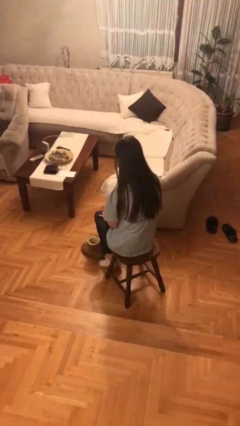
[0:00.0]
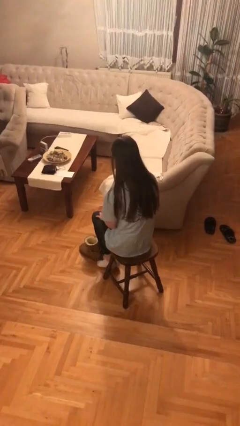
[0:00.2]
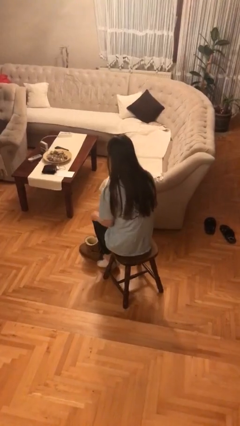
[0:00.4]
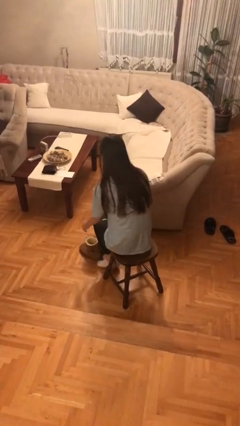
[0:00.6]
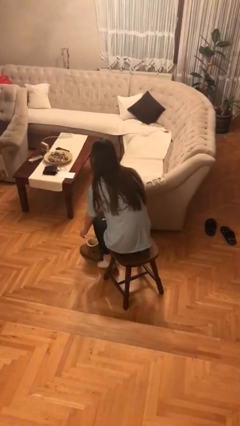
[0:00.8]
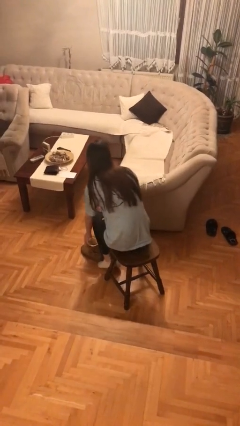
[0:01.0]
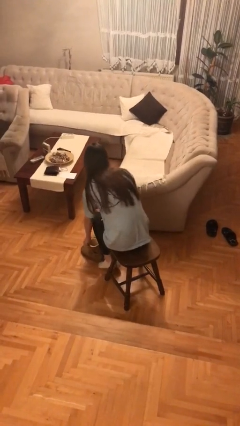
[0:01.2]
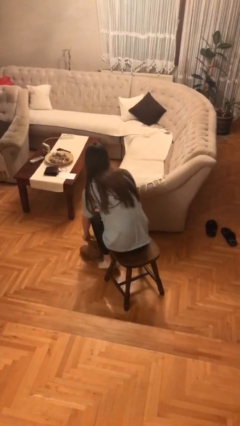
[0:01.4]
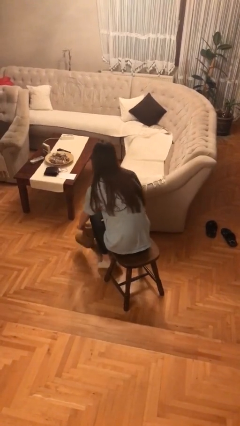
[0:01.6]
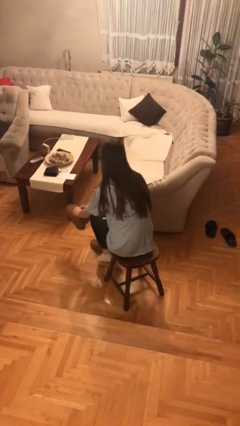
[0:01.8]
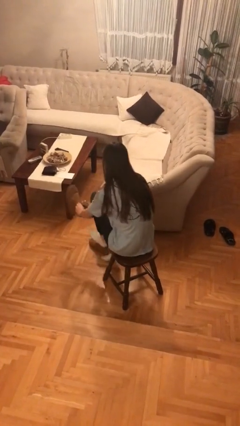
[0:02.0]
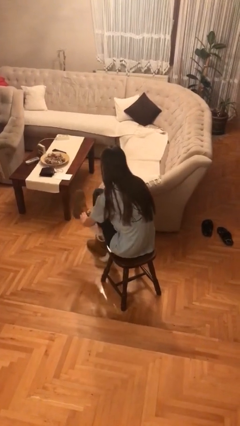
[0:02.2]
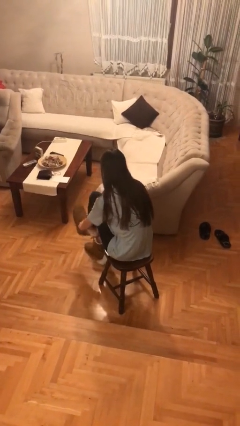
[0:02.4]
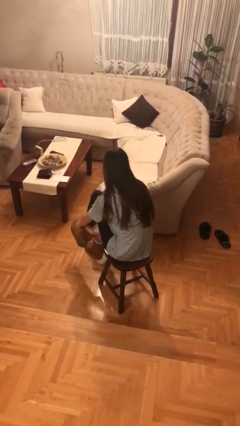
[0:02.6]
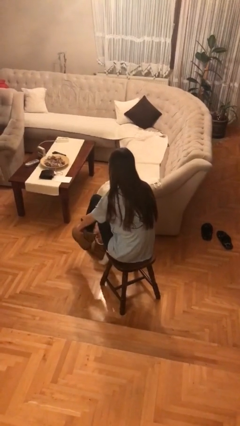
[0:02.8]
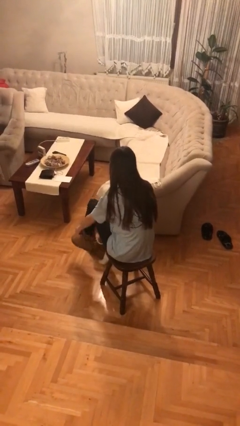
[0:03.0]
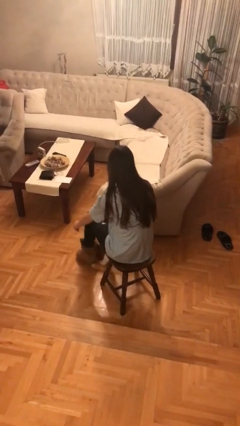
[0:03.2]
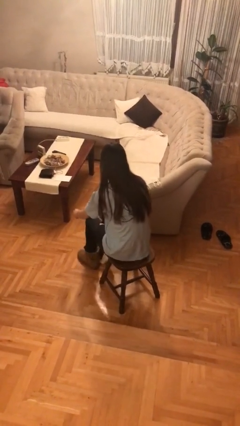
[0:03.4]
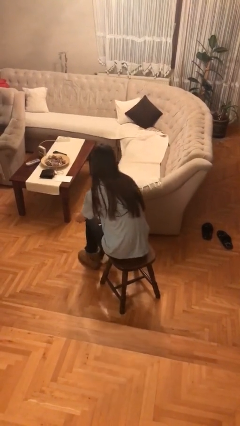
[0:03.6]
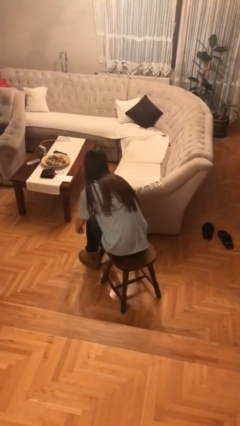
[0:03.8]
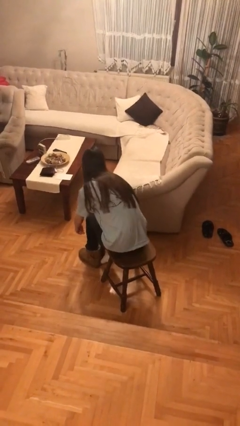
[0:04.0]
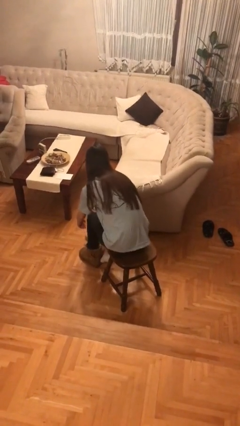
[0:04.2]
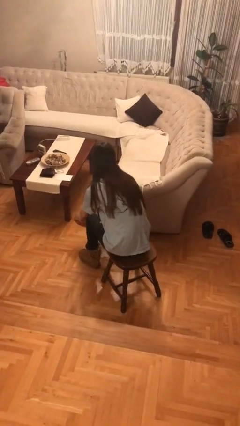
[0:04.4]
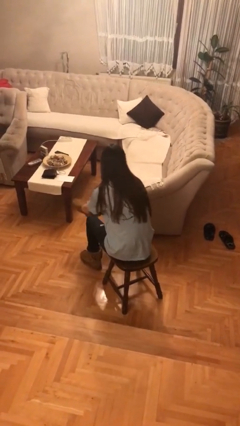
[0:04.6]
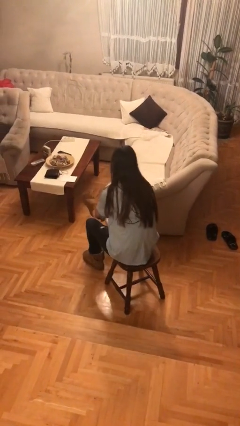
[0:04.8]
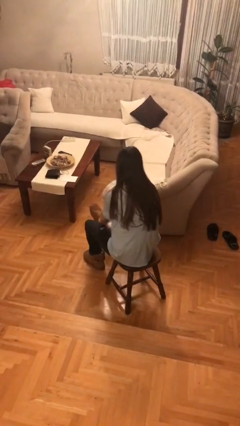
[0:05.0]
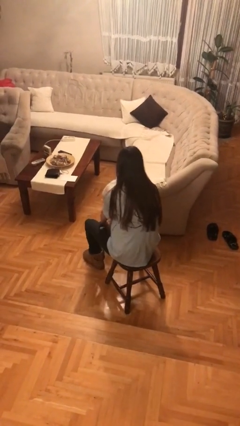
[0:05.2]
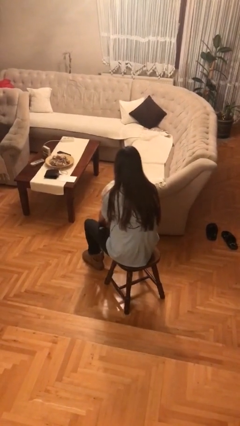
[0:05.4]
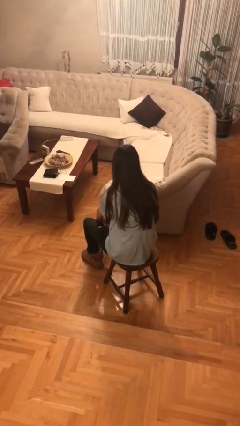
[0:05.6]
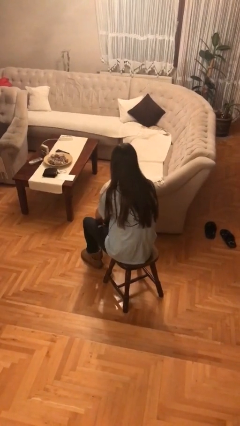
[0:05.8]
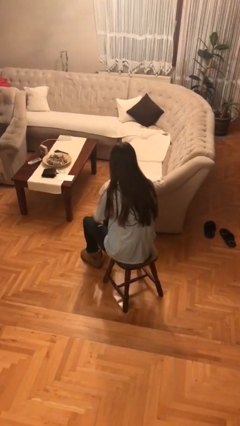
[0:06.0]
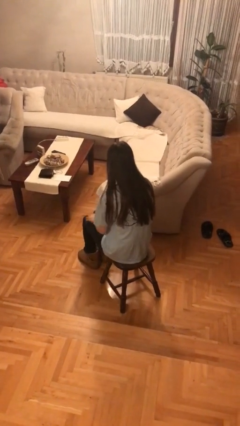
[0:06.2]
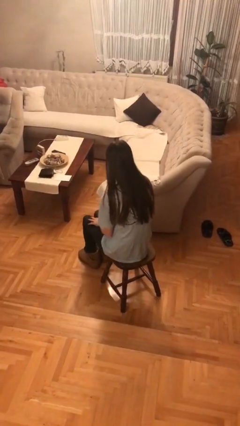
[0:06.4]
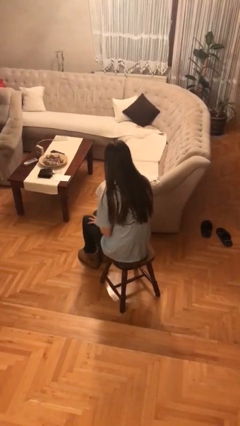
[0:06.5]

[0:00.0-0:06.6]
person puts on shoes

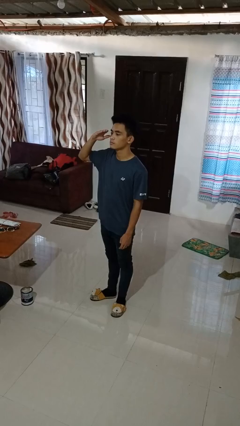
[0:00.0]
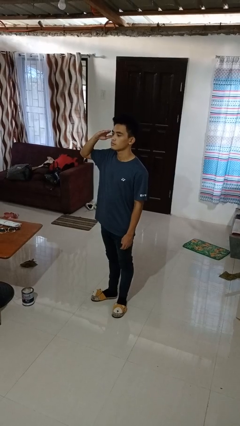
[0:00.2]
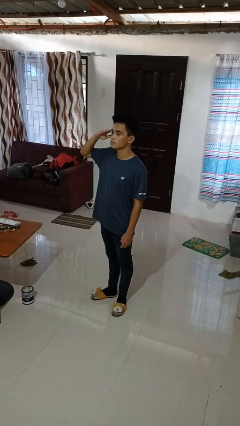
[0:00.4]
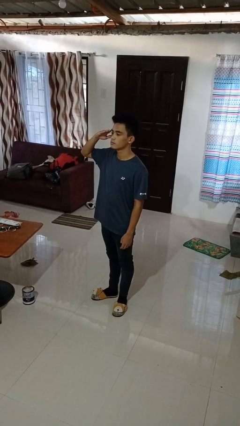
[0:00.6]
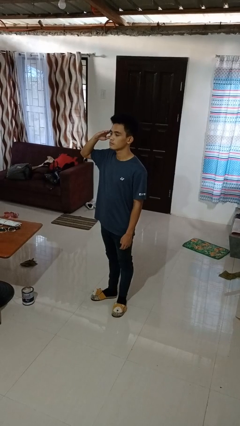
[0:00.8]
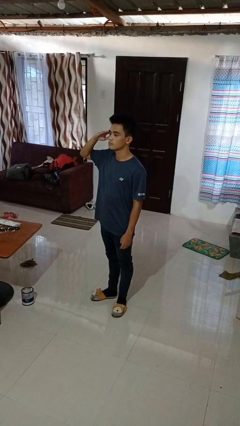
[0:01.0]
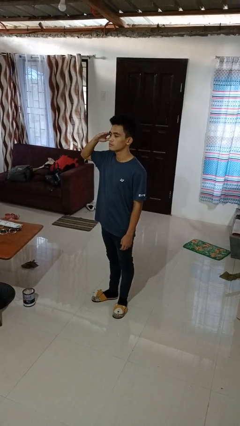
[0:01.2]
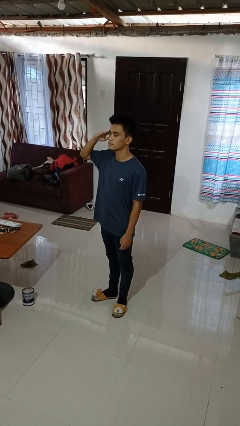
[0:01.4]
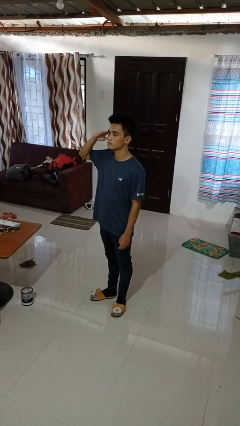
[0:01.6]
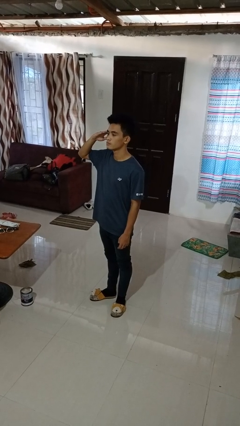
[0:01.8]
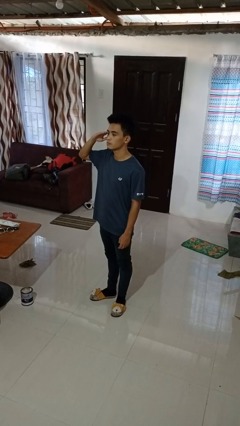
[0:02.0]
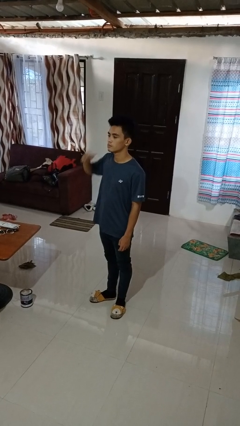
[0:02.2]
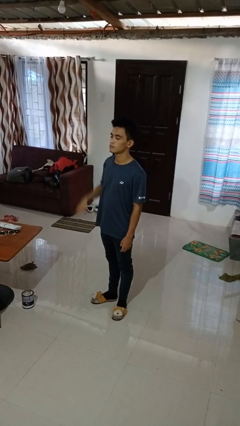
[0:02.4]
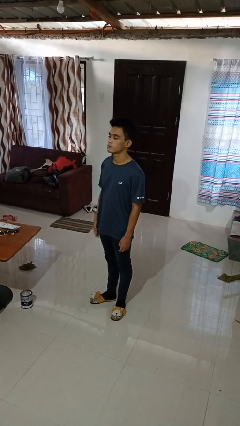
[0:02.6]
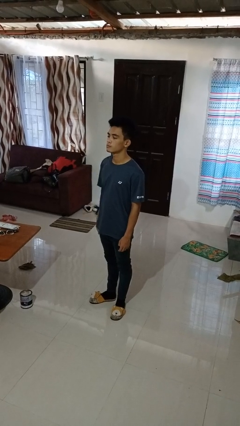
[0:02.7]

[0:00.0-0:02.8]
person salutes

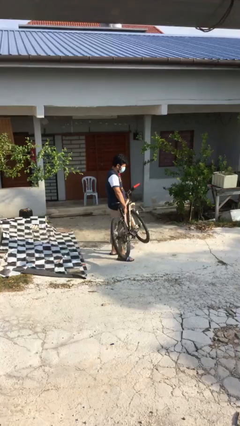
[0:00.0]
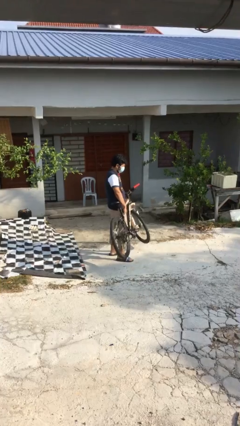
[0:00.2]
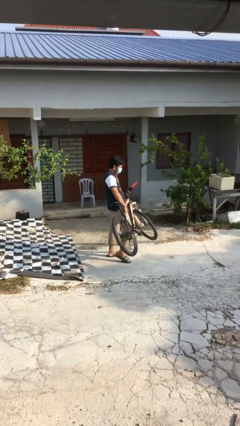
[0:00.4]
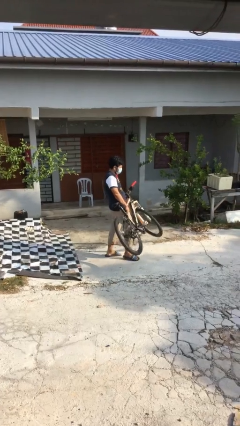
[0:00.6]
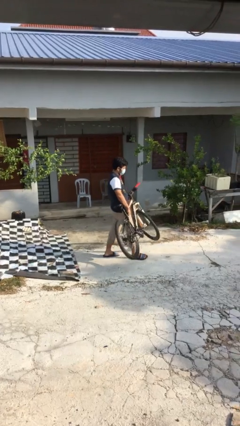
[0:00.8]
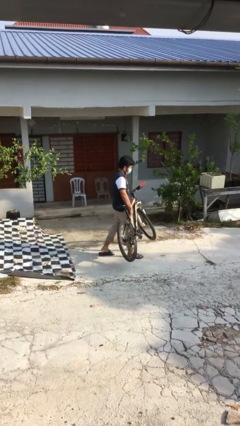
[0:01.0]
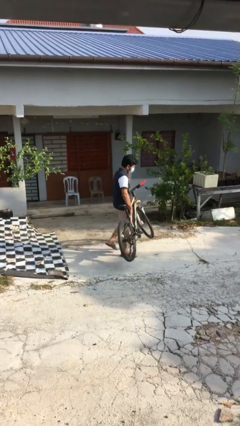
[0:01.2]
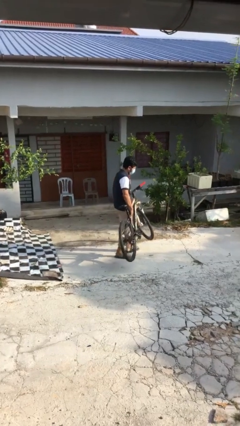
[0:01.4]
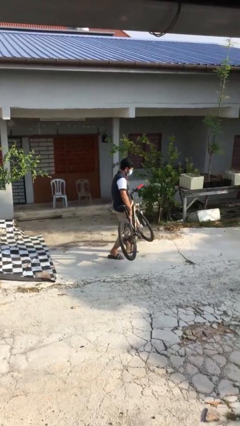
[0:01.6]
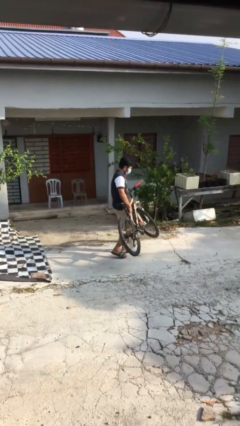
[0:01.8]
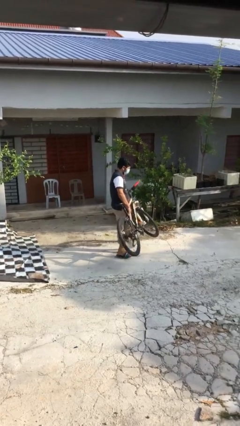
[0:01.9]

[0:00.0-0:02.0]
person carries bicycle

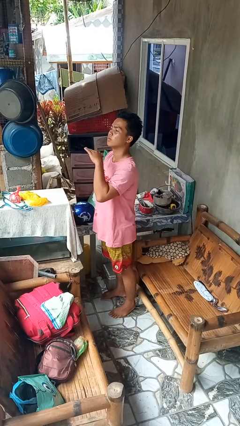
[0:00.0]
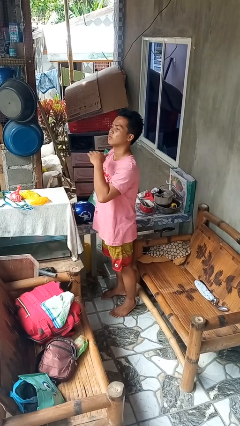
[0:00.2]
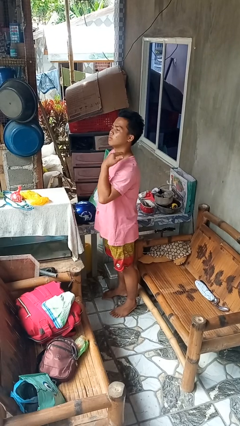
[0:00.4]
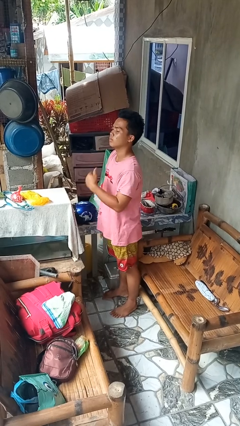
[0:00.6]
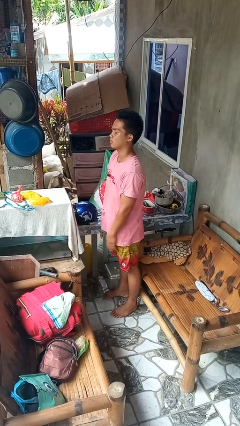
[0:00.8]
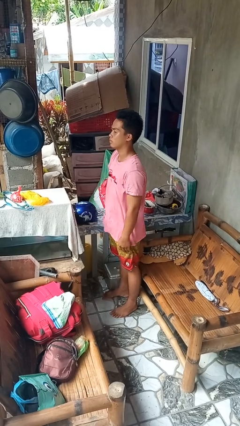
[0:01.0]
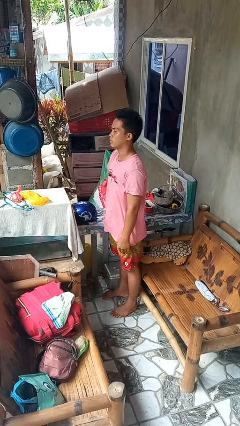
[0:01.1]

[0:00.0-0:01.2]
person gestures cut

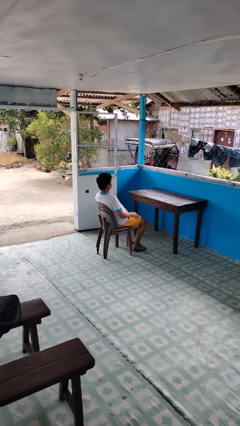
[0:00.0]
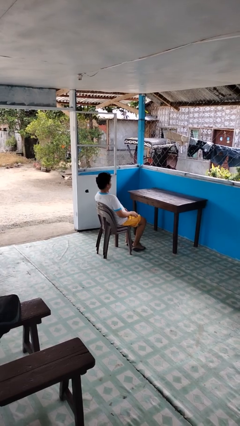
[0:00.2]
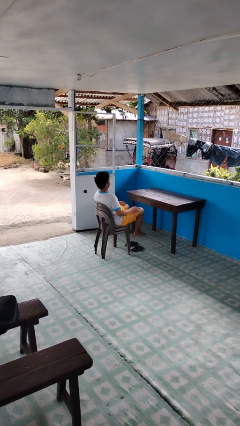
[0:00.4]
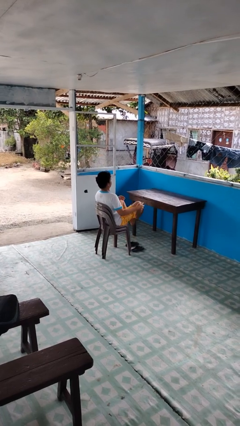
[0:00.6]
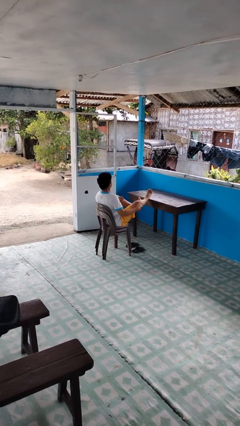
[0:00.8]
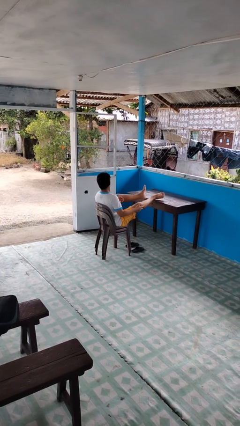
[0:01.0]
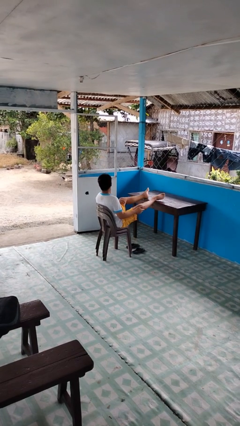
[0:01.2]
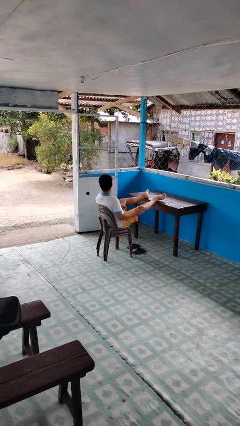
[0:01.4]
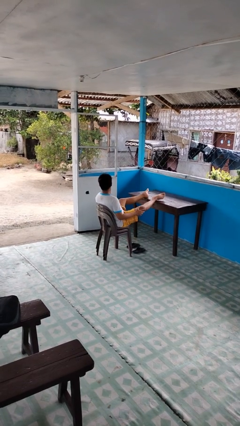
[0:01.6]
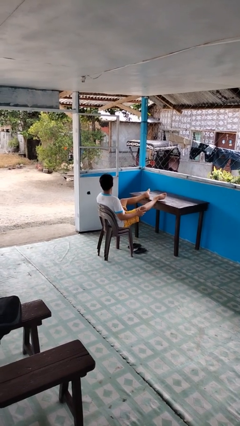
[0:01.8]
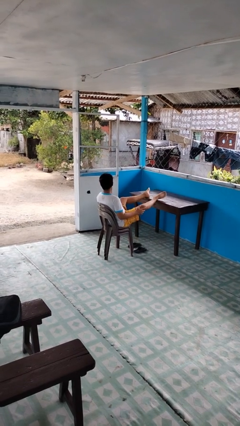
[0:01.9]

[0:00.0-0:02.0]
person puts feet up

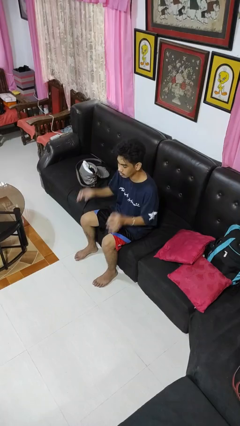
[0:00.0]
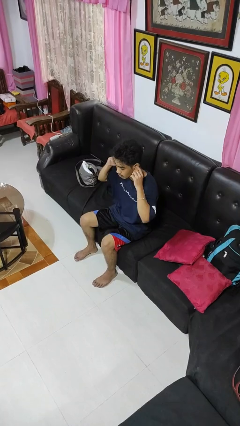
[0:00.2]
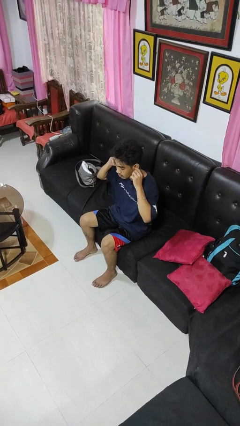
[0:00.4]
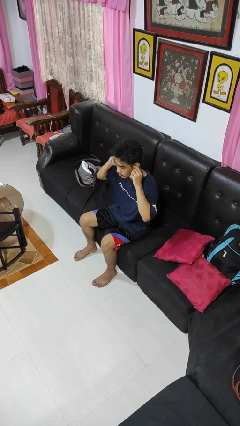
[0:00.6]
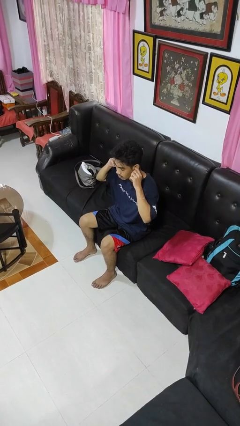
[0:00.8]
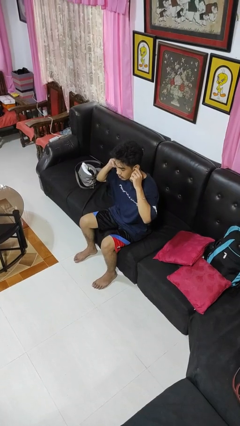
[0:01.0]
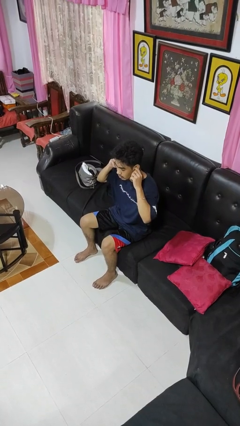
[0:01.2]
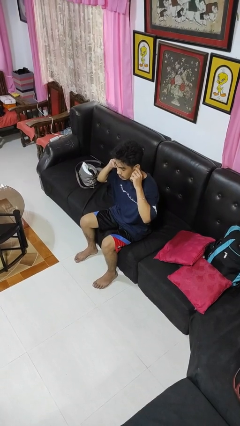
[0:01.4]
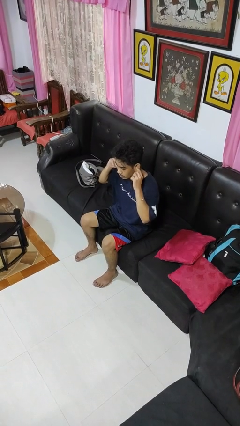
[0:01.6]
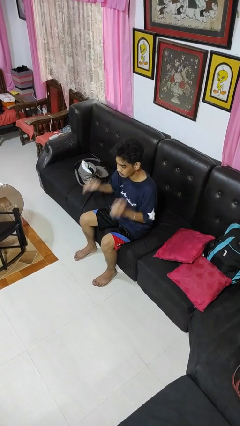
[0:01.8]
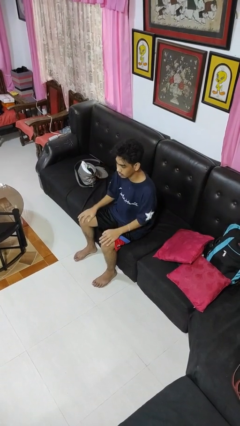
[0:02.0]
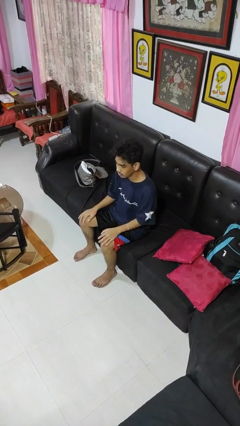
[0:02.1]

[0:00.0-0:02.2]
person puts fingers in ear

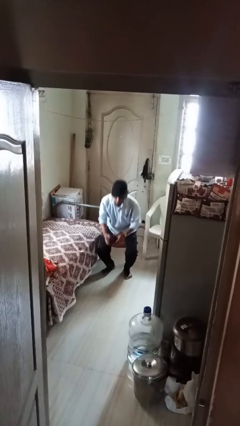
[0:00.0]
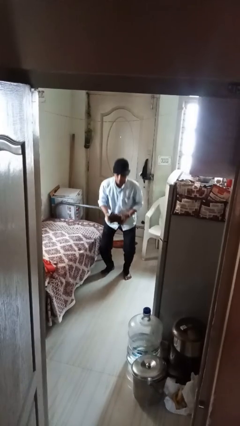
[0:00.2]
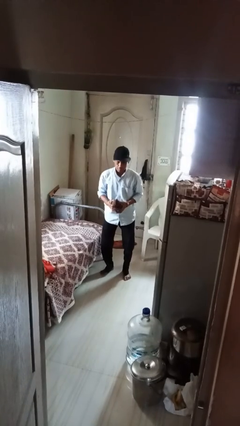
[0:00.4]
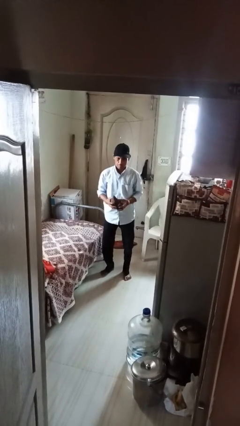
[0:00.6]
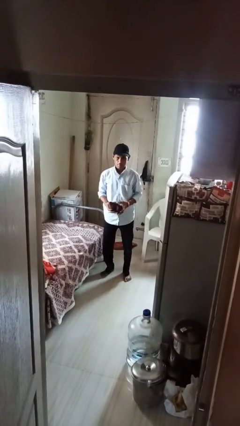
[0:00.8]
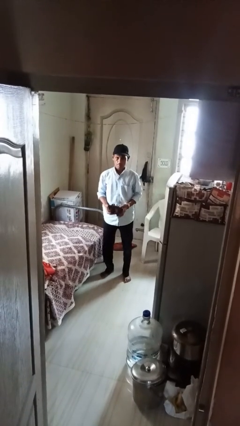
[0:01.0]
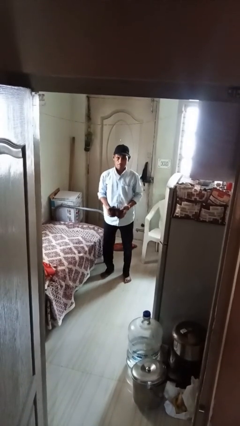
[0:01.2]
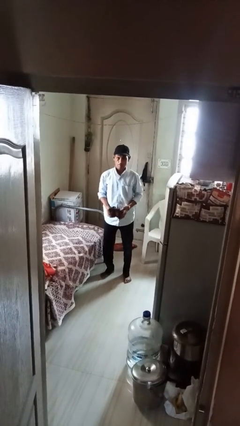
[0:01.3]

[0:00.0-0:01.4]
person catches dropped object
